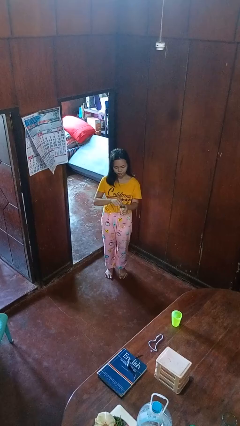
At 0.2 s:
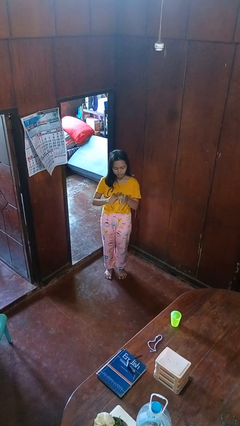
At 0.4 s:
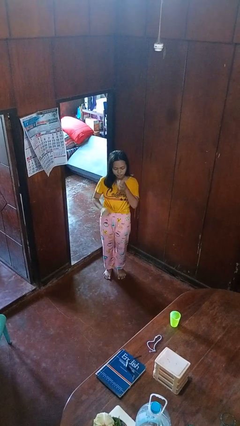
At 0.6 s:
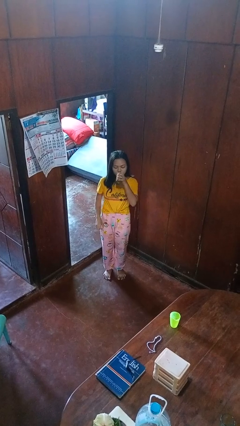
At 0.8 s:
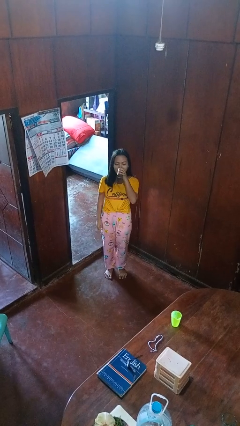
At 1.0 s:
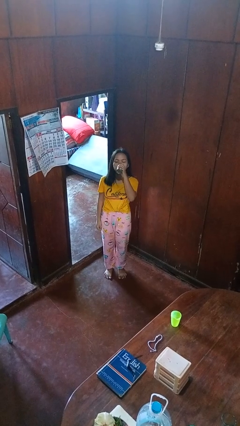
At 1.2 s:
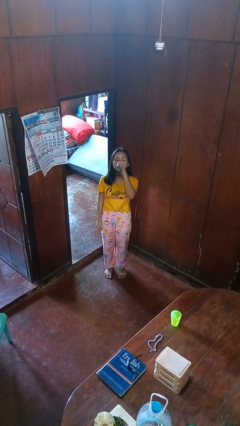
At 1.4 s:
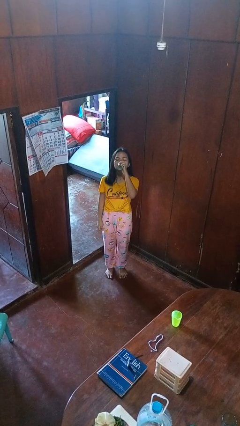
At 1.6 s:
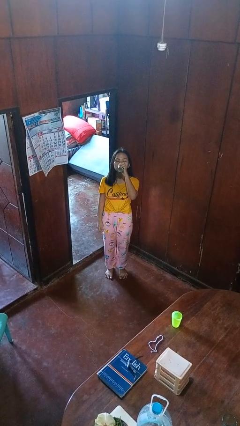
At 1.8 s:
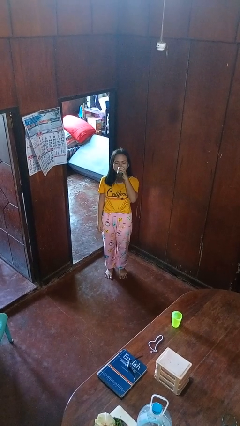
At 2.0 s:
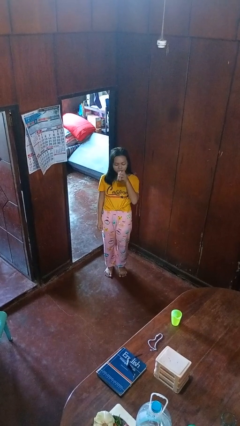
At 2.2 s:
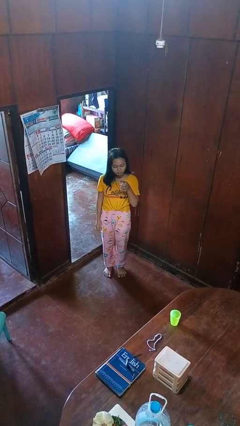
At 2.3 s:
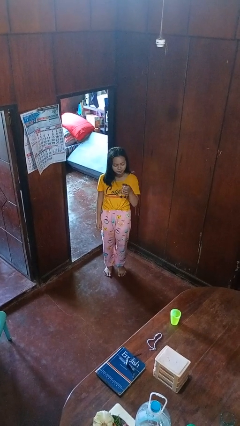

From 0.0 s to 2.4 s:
person drinks from beverage can

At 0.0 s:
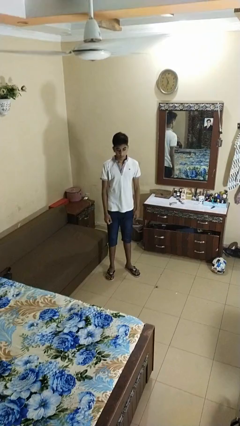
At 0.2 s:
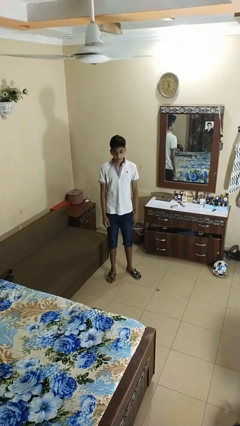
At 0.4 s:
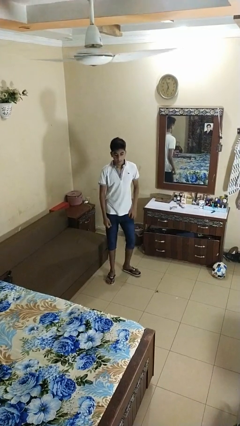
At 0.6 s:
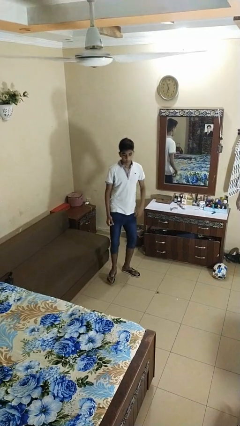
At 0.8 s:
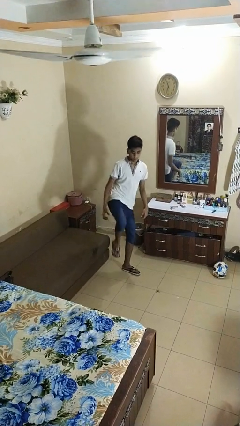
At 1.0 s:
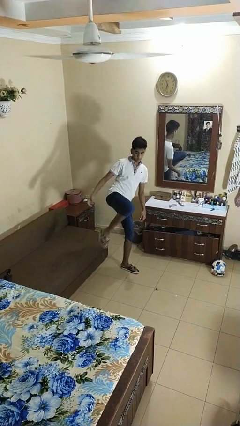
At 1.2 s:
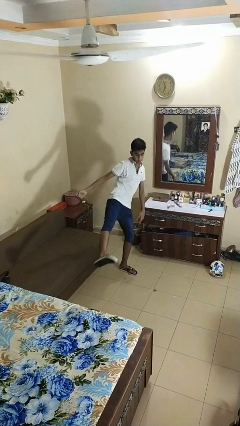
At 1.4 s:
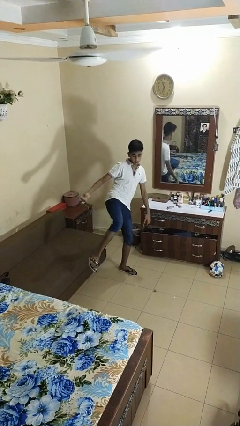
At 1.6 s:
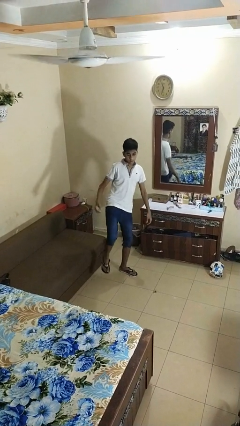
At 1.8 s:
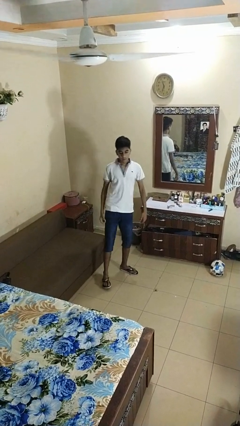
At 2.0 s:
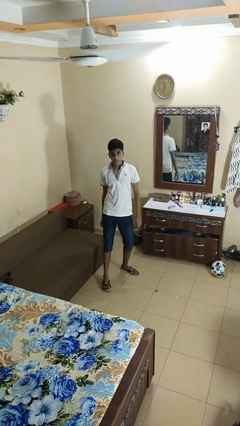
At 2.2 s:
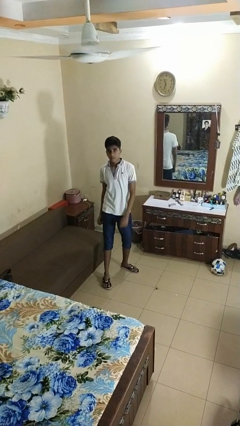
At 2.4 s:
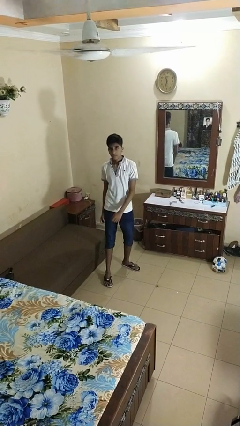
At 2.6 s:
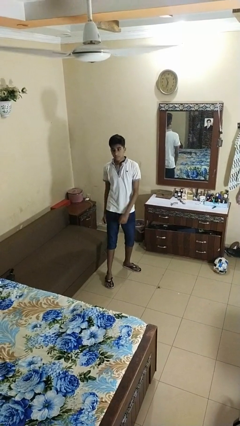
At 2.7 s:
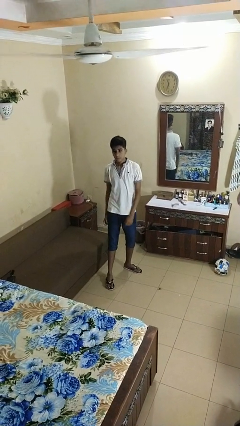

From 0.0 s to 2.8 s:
person karate kicks

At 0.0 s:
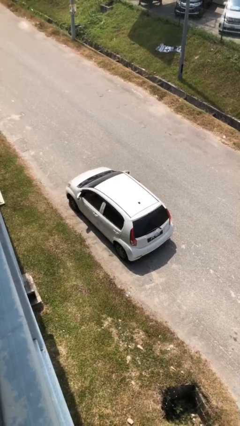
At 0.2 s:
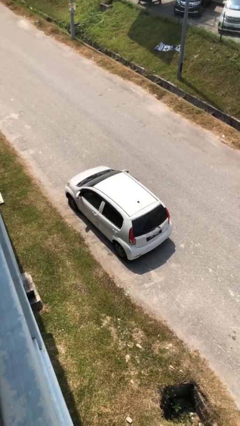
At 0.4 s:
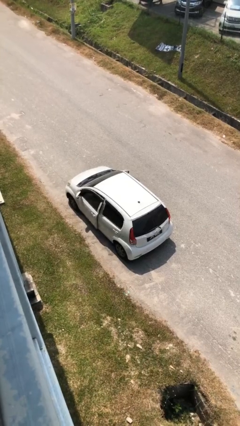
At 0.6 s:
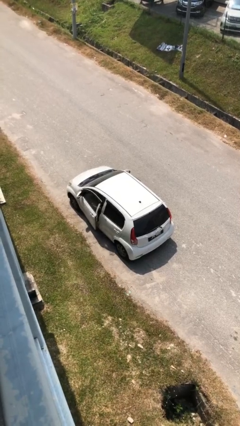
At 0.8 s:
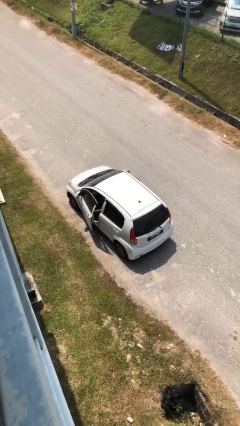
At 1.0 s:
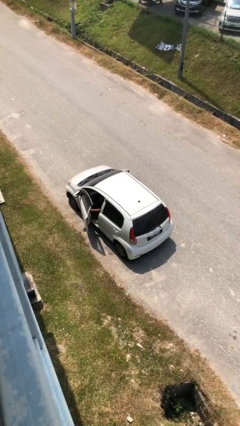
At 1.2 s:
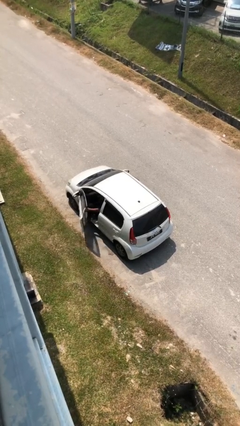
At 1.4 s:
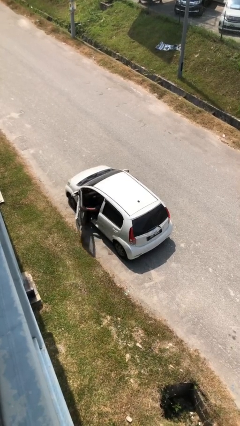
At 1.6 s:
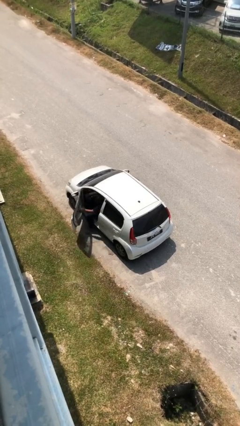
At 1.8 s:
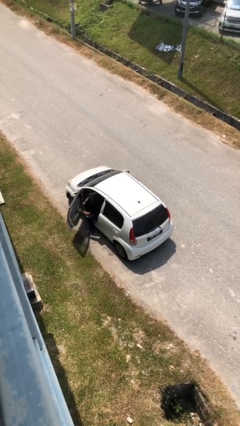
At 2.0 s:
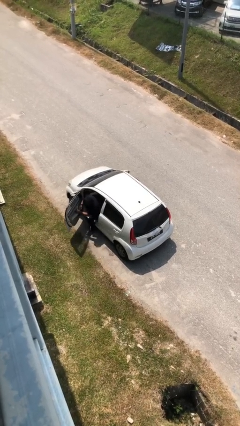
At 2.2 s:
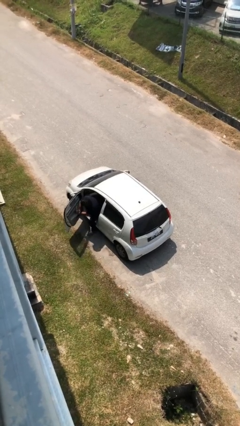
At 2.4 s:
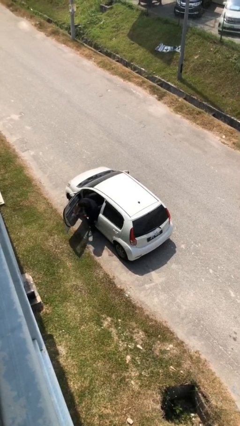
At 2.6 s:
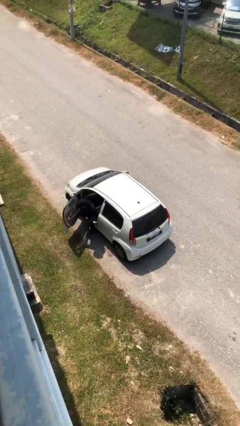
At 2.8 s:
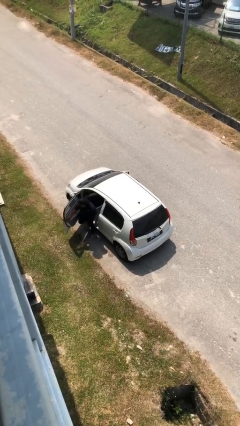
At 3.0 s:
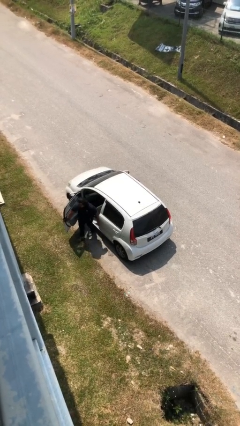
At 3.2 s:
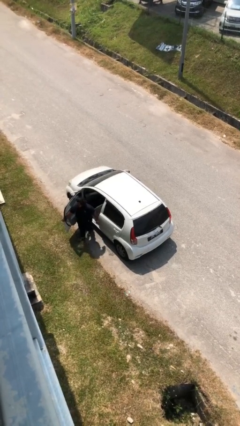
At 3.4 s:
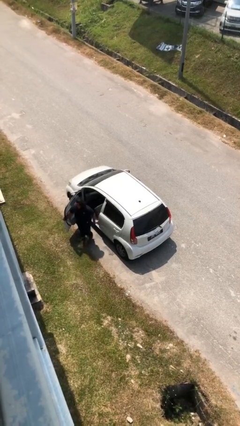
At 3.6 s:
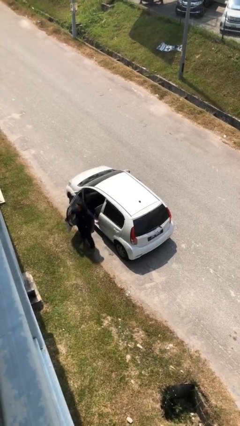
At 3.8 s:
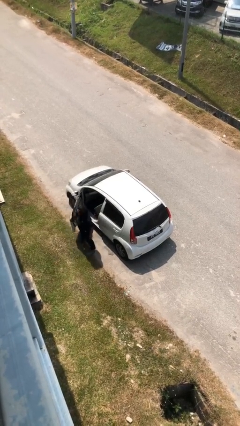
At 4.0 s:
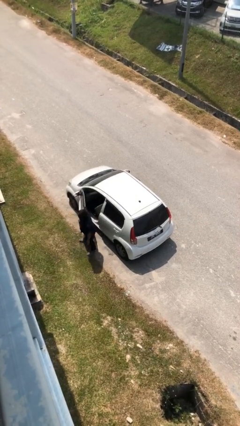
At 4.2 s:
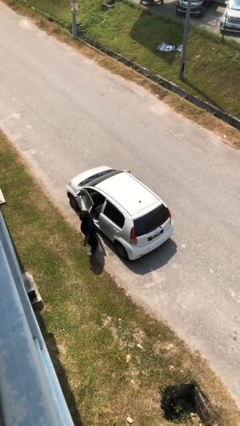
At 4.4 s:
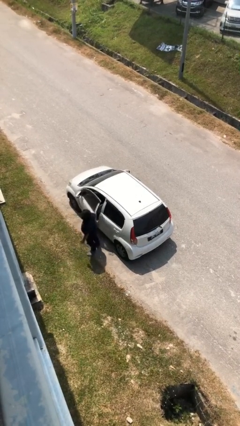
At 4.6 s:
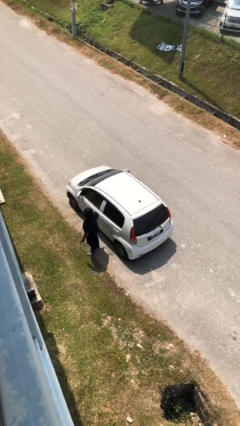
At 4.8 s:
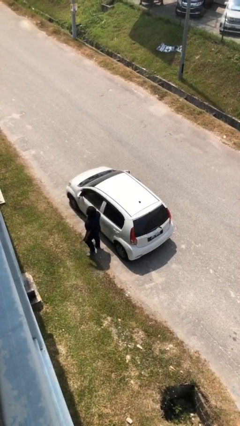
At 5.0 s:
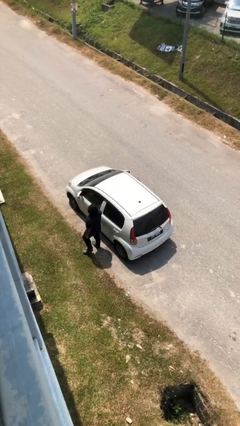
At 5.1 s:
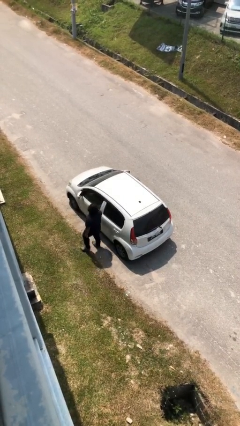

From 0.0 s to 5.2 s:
car drops off person

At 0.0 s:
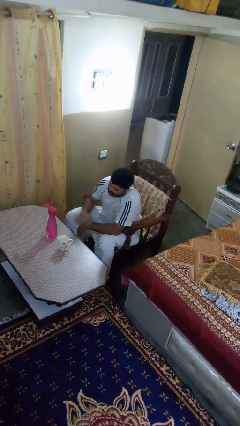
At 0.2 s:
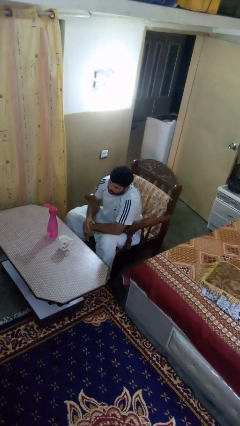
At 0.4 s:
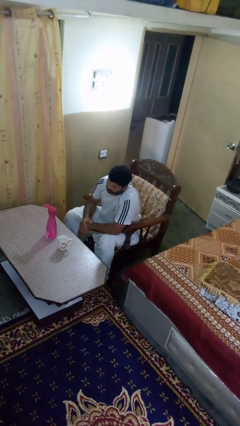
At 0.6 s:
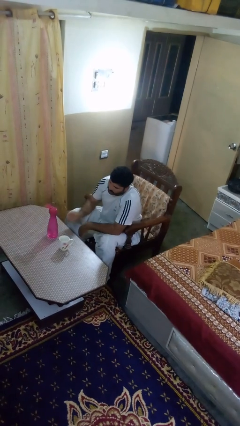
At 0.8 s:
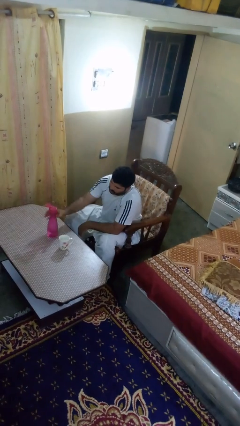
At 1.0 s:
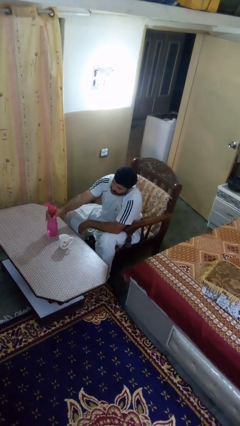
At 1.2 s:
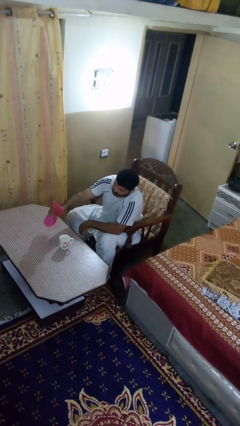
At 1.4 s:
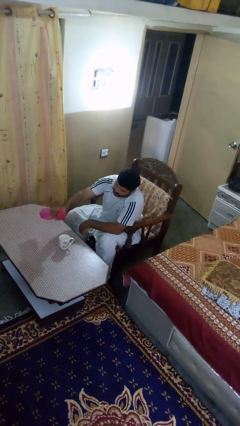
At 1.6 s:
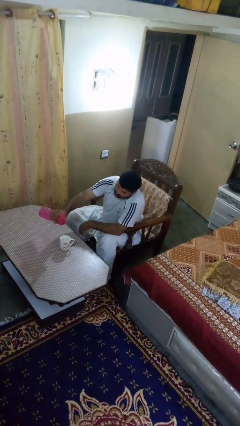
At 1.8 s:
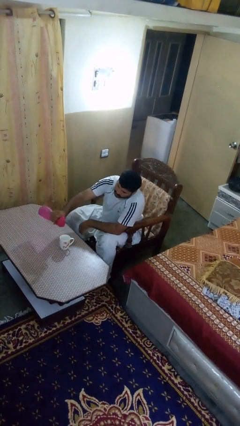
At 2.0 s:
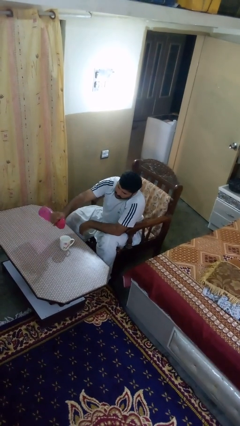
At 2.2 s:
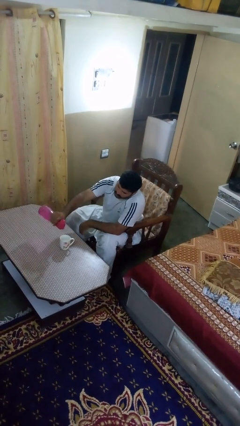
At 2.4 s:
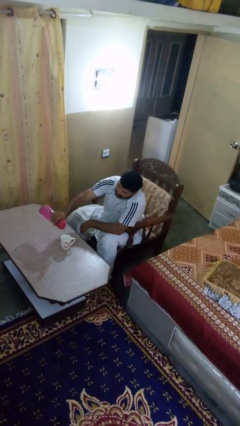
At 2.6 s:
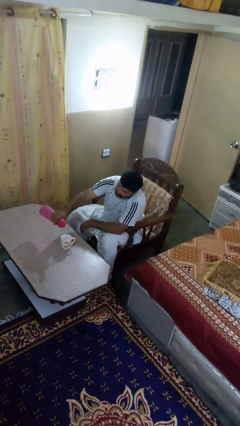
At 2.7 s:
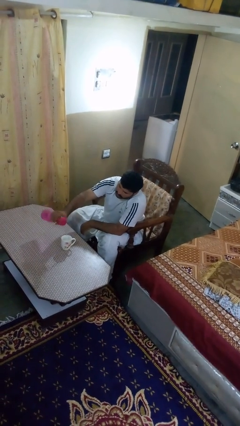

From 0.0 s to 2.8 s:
person pours liquid into cup

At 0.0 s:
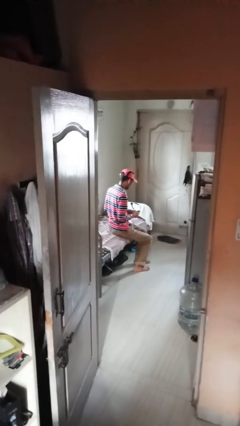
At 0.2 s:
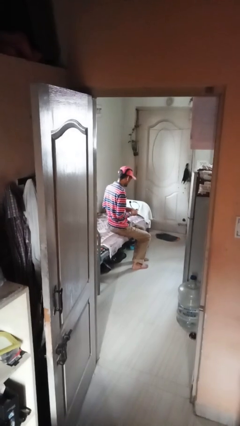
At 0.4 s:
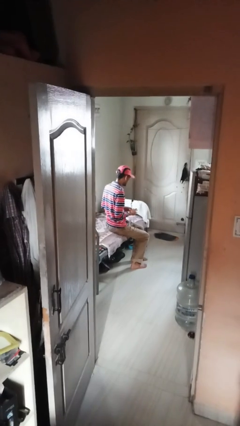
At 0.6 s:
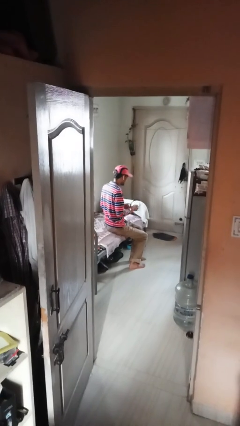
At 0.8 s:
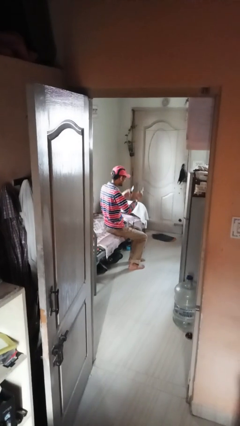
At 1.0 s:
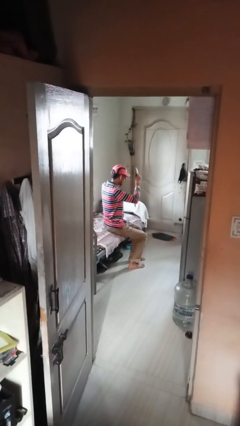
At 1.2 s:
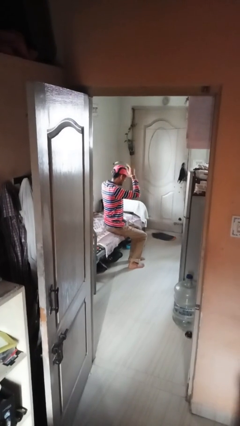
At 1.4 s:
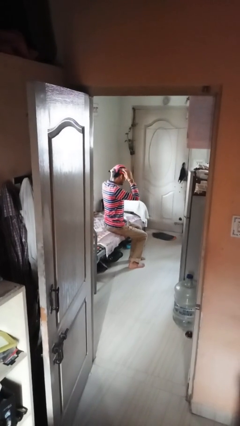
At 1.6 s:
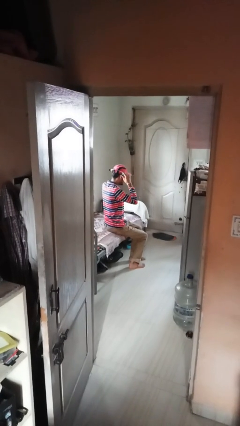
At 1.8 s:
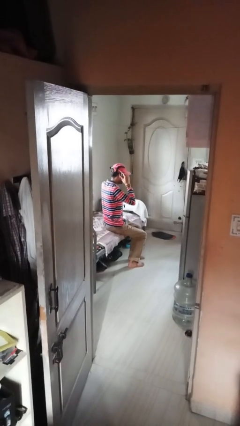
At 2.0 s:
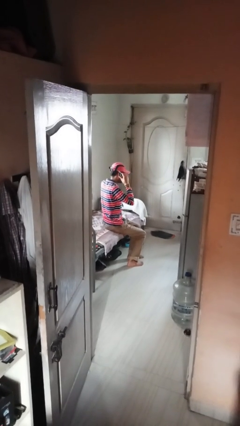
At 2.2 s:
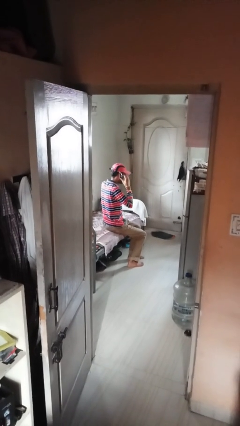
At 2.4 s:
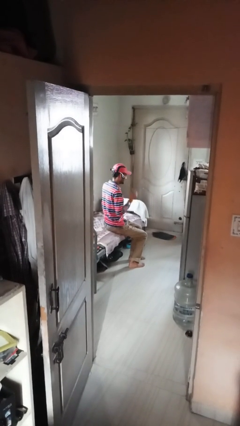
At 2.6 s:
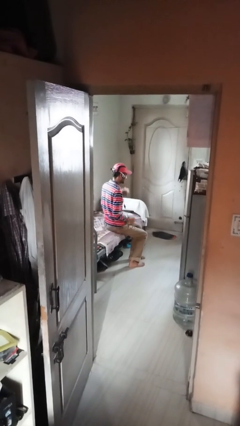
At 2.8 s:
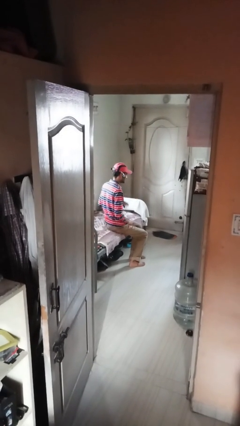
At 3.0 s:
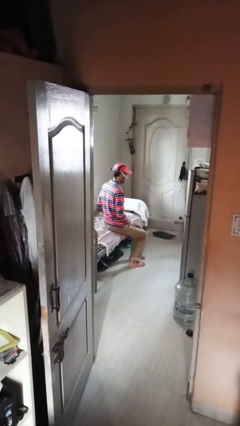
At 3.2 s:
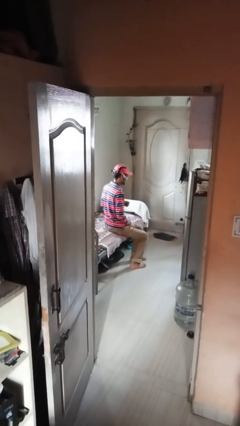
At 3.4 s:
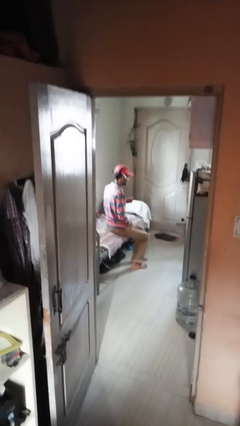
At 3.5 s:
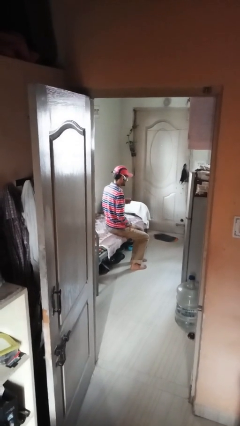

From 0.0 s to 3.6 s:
person puts on headphones

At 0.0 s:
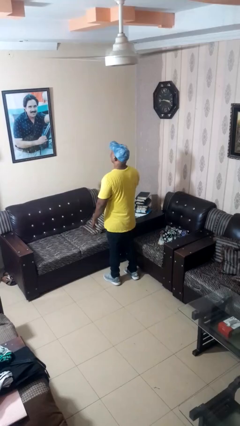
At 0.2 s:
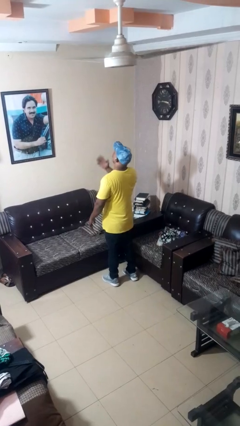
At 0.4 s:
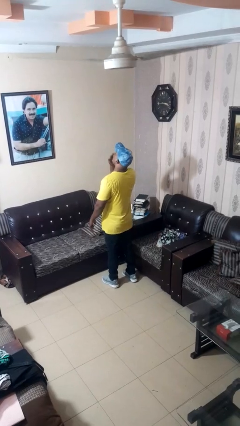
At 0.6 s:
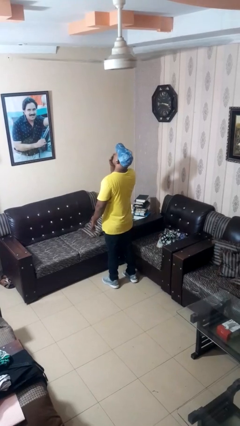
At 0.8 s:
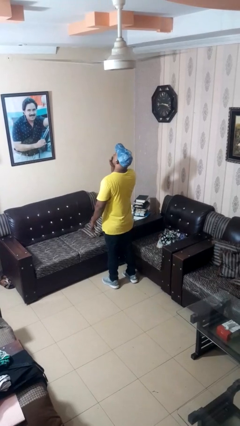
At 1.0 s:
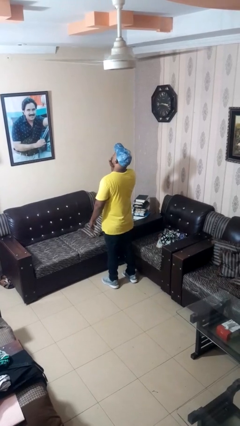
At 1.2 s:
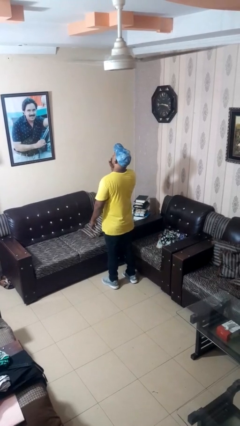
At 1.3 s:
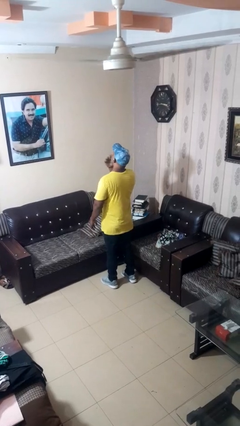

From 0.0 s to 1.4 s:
person yawns
